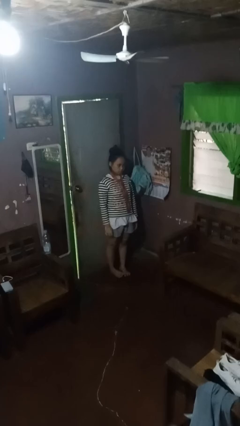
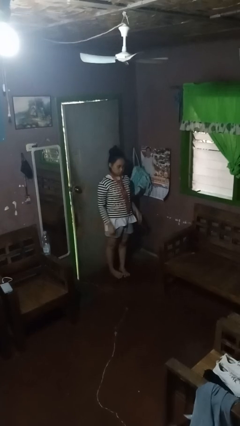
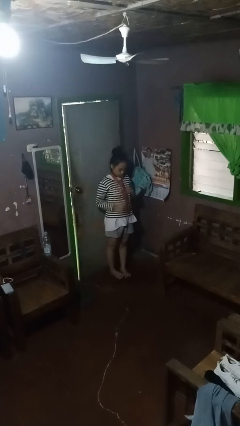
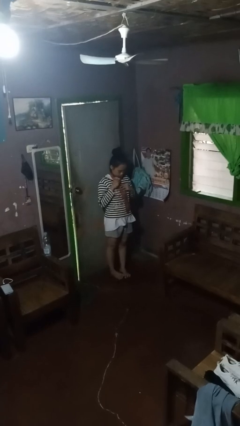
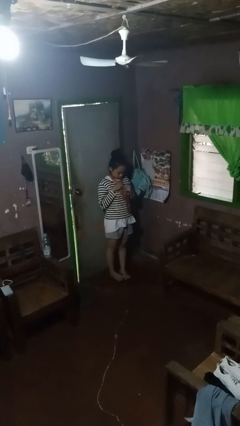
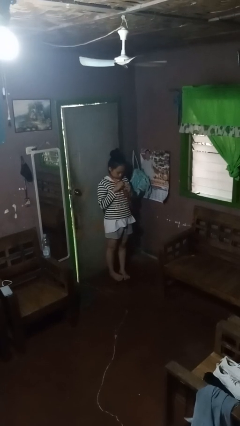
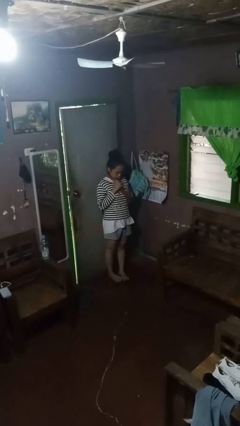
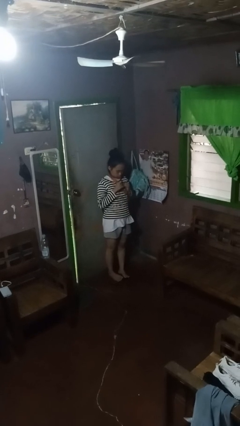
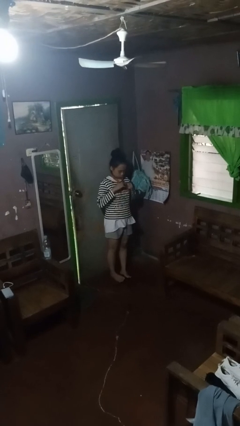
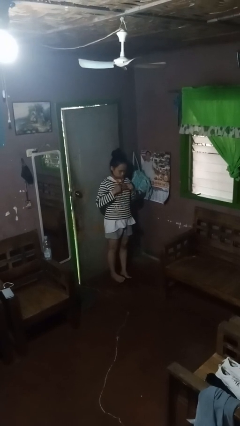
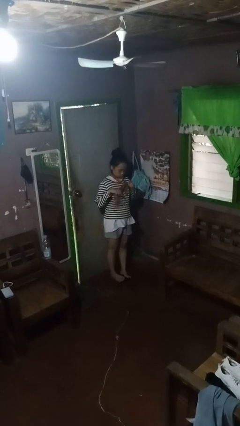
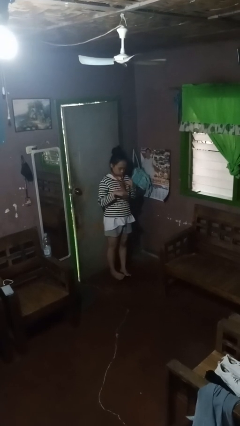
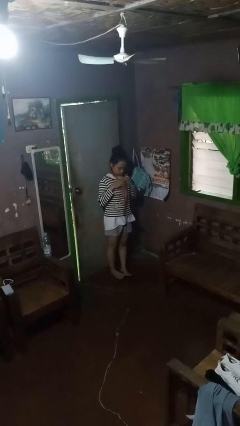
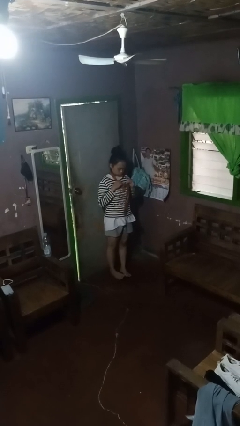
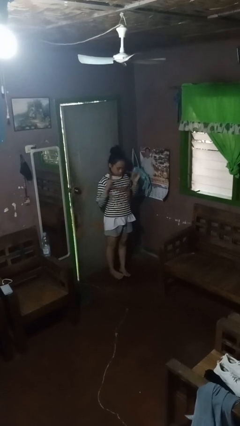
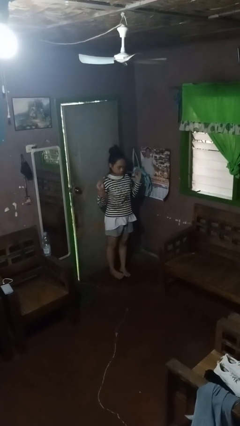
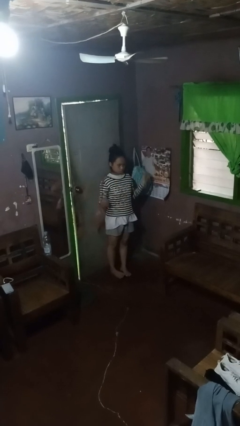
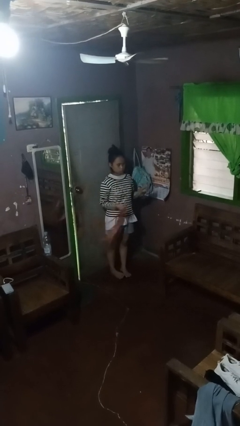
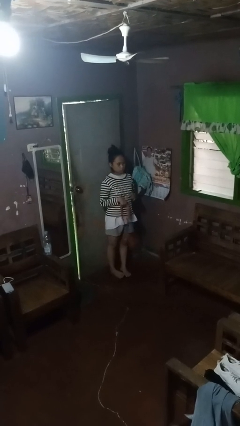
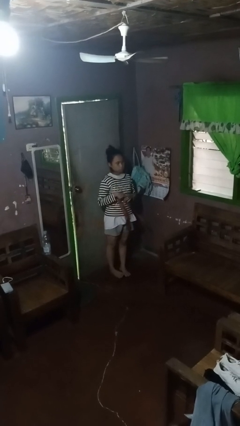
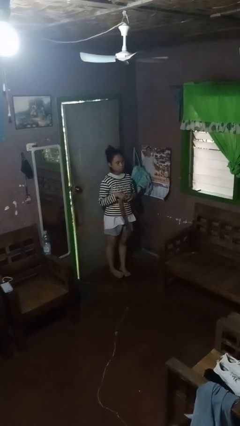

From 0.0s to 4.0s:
person takes off necktie

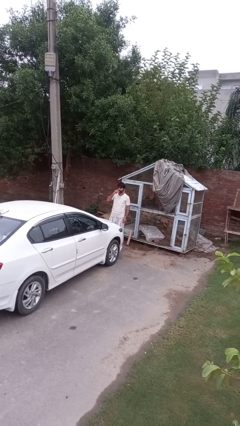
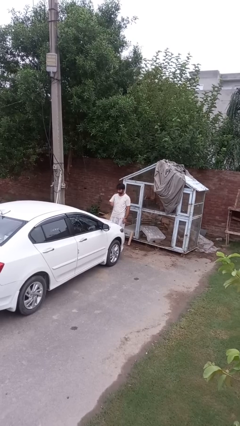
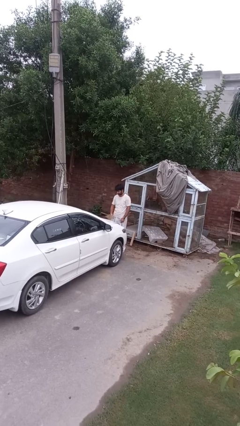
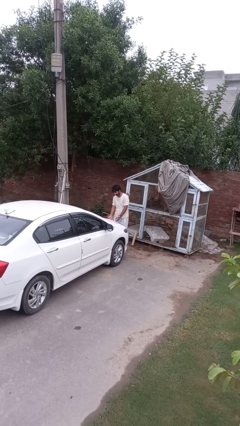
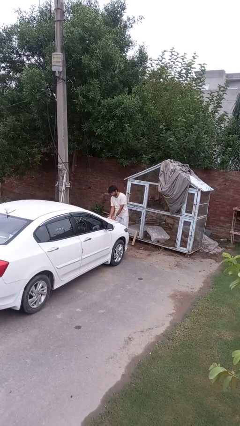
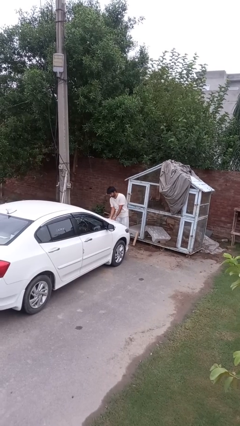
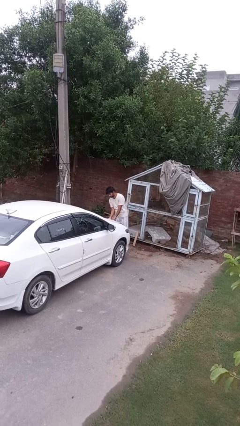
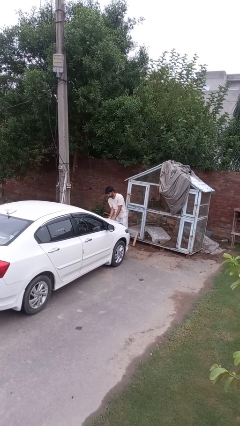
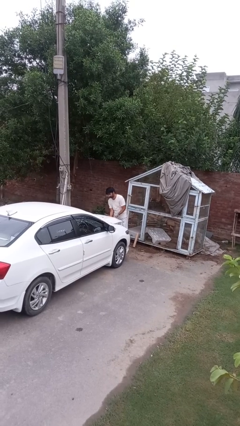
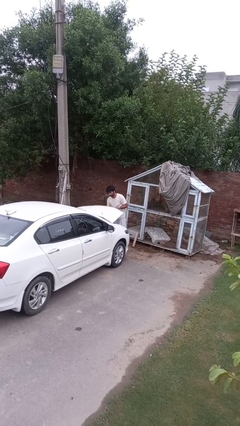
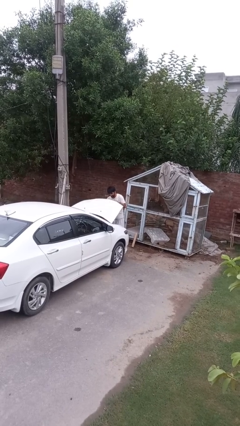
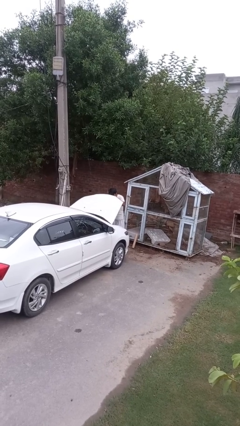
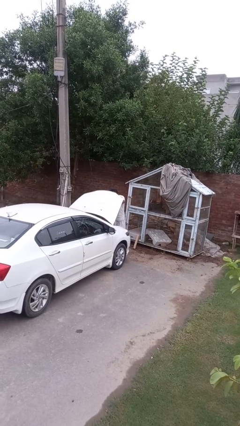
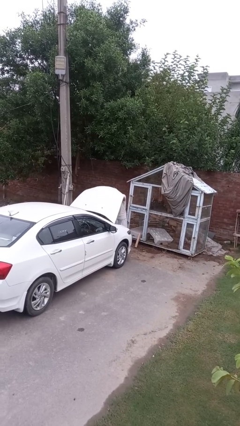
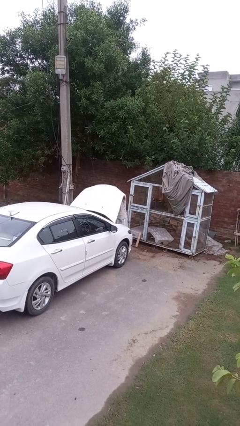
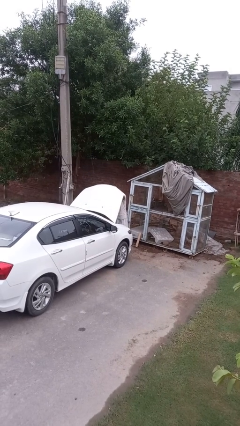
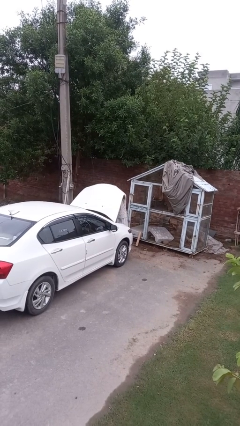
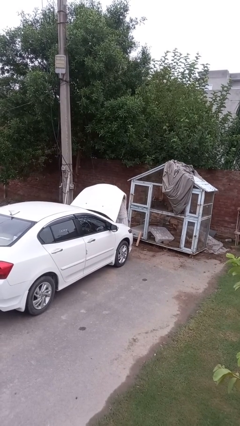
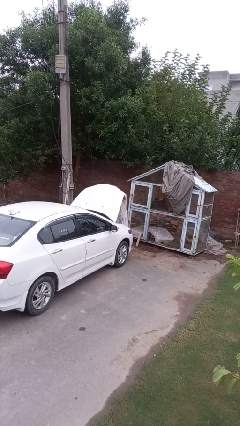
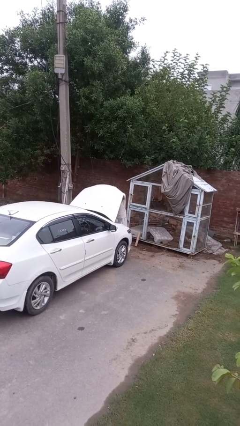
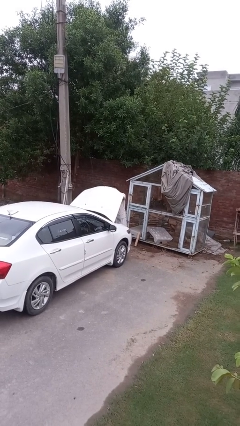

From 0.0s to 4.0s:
person opens car hood

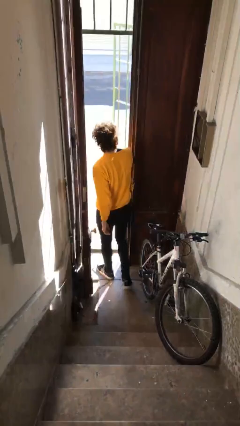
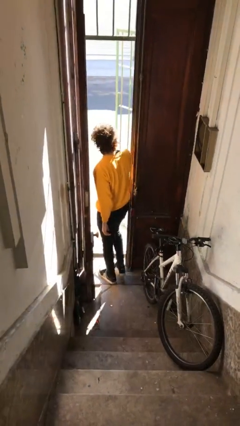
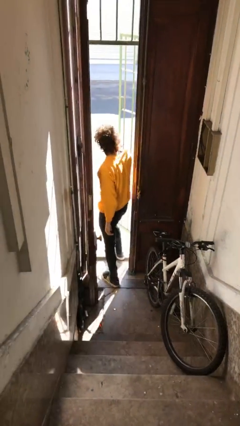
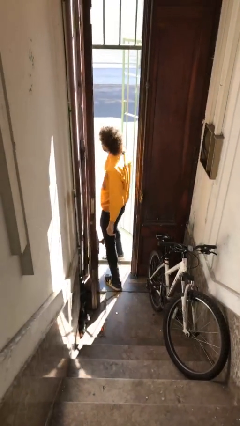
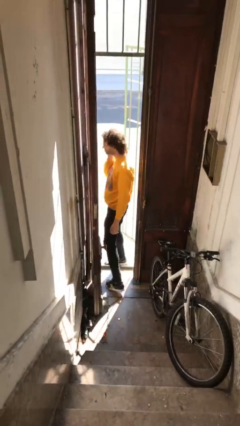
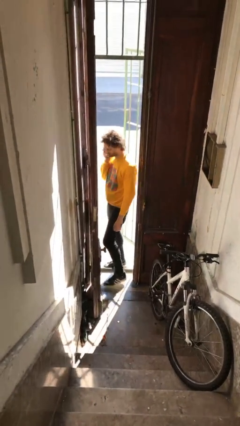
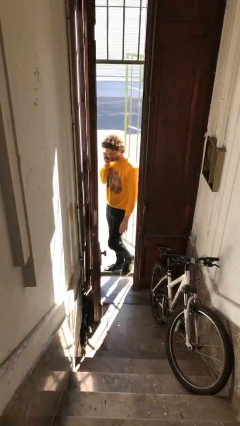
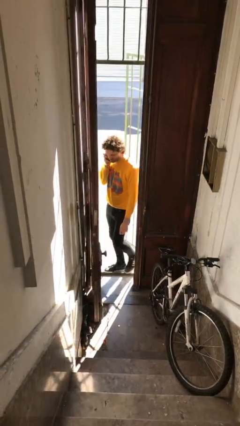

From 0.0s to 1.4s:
person exits scene through structure

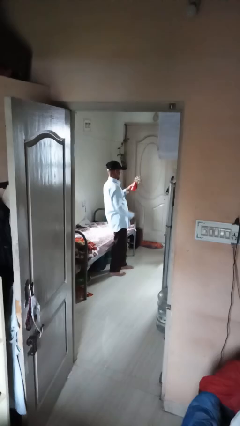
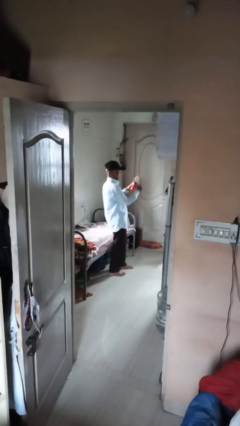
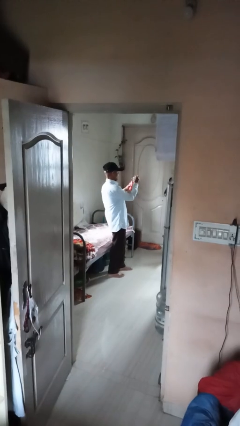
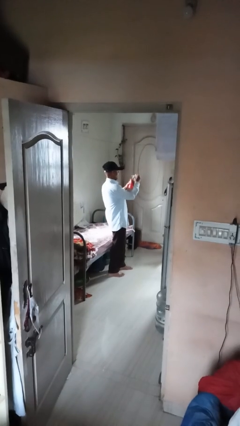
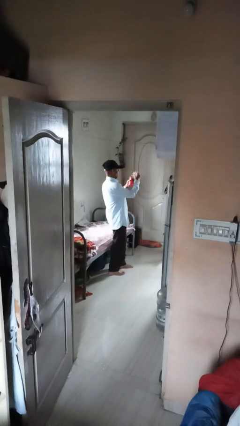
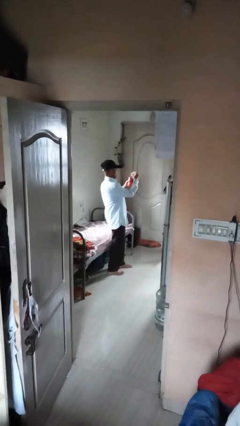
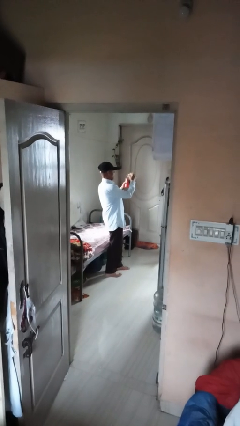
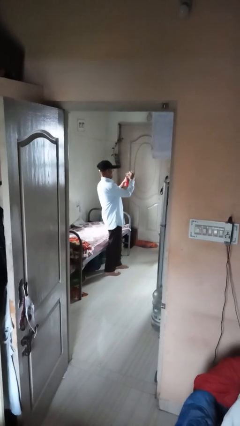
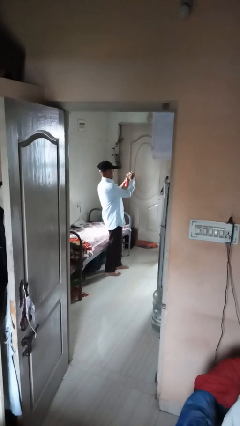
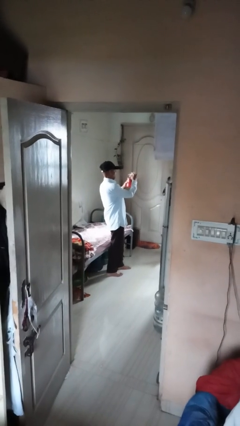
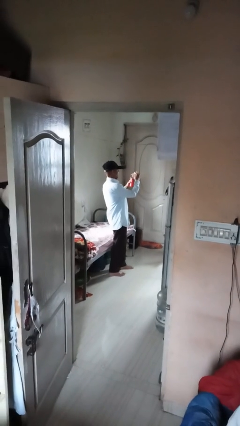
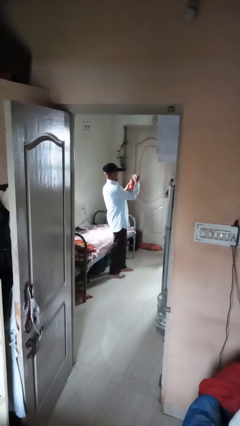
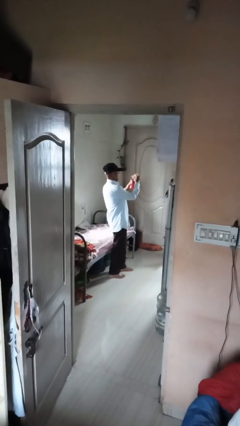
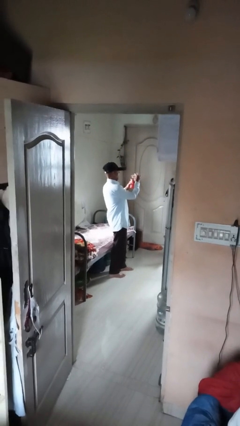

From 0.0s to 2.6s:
person arranges flowers in vase

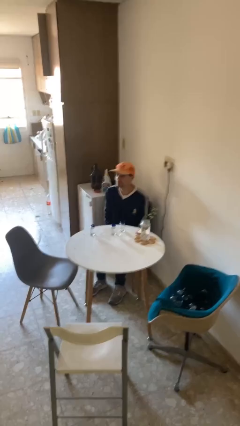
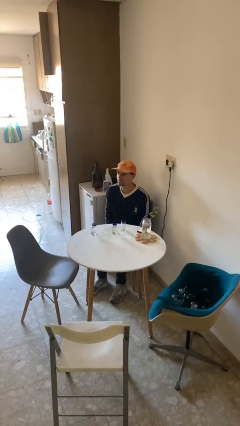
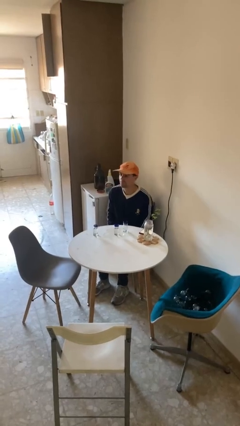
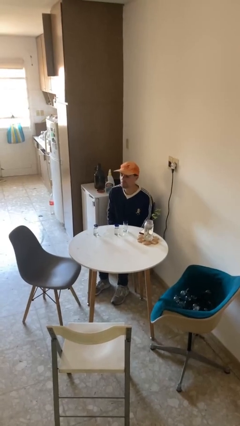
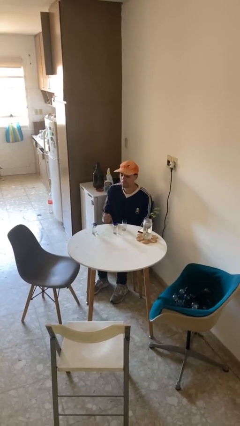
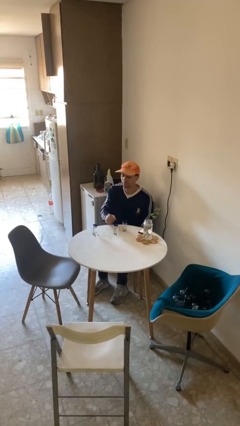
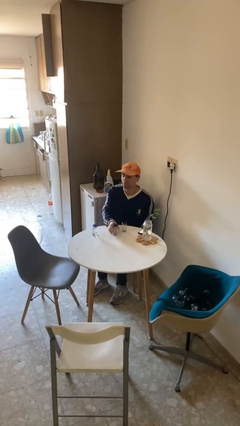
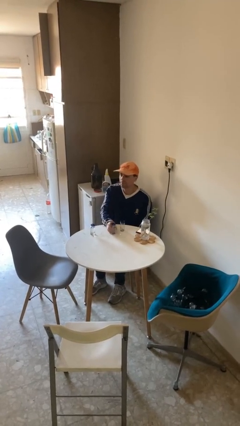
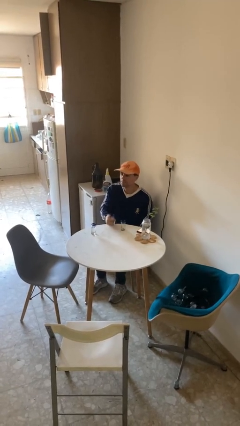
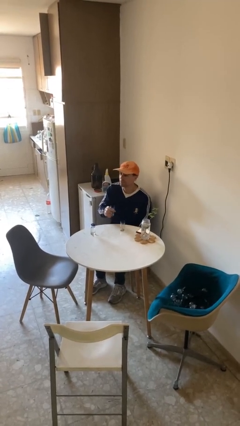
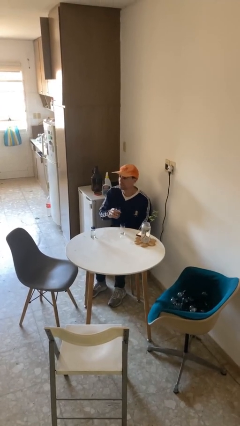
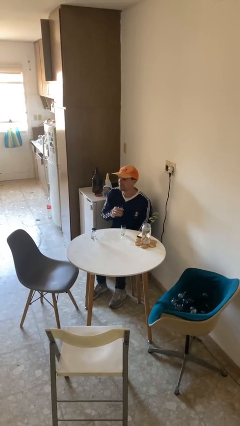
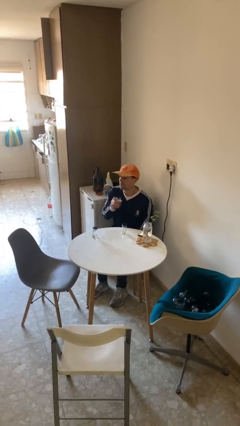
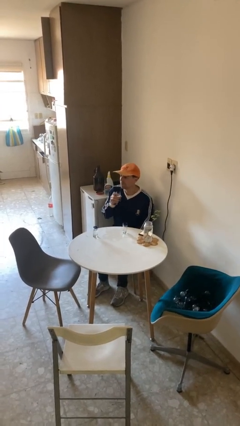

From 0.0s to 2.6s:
person picks up object from table

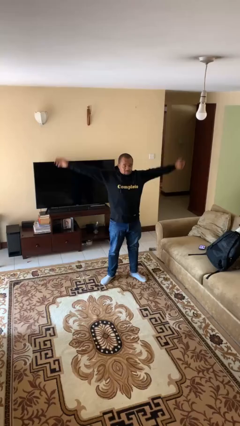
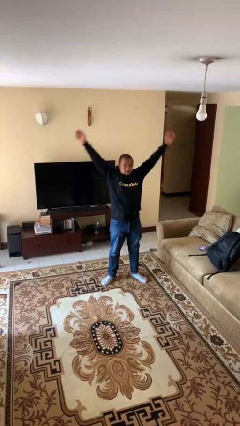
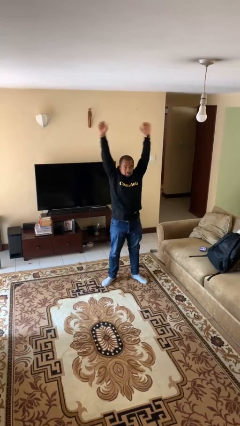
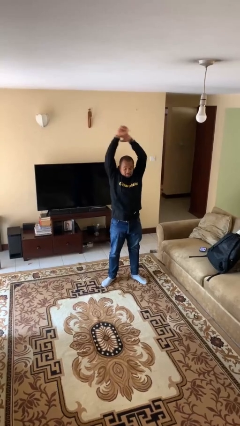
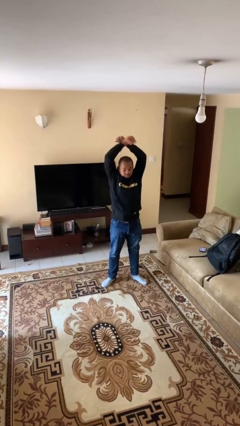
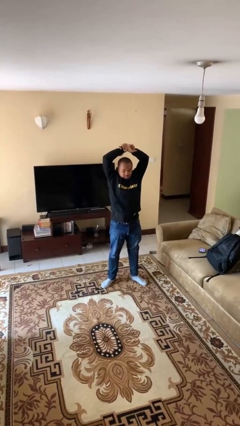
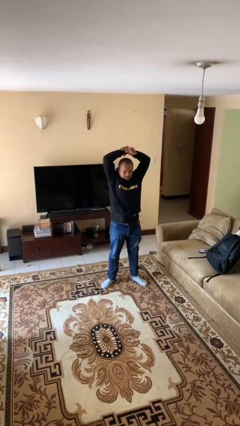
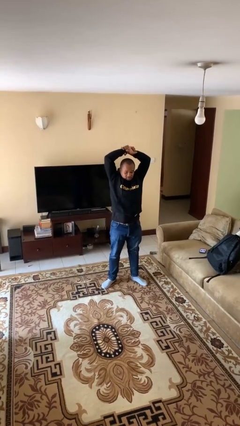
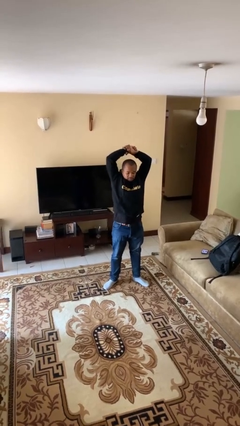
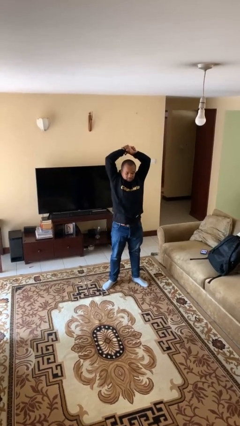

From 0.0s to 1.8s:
person stretches arms over head

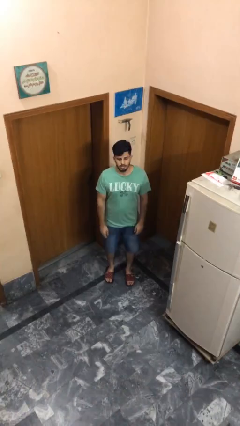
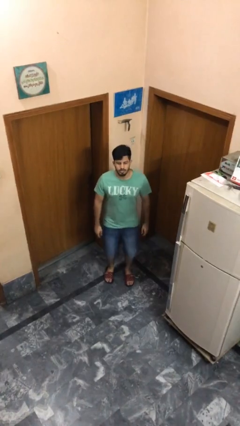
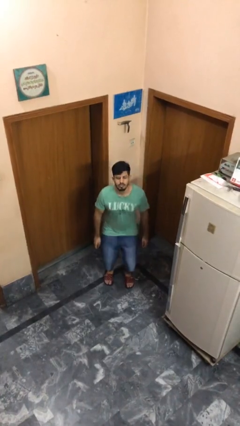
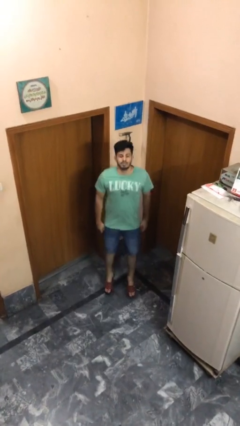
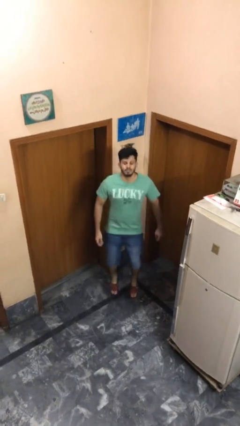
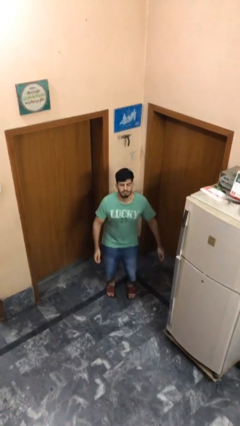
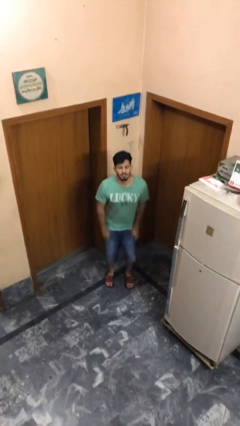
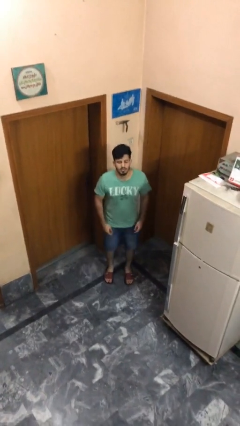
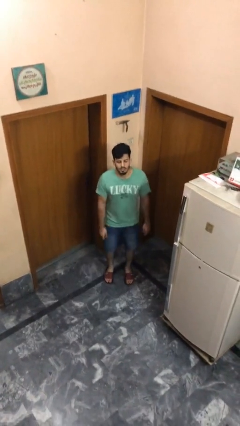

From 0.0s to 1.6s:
person jumps
